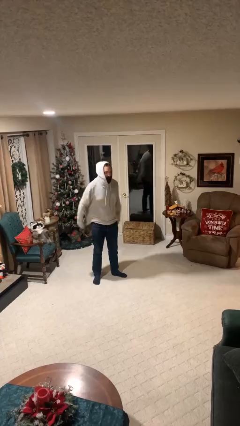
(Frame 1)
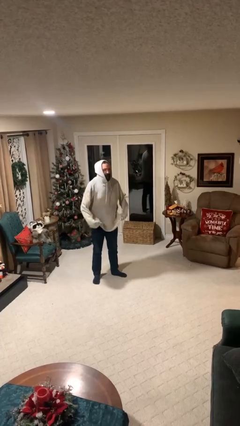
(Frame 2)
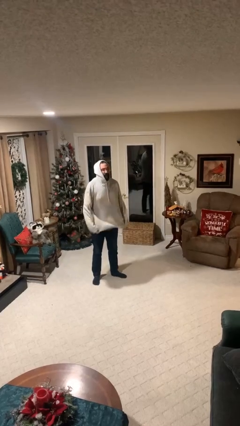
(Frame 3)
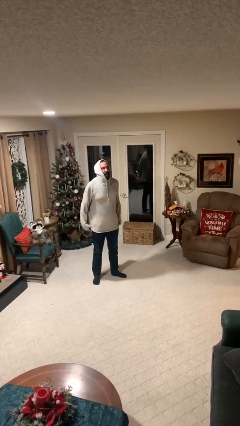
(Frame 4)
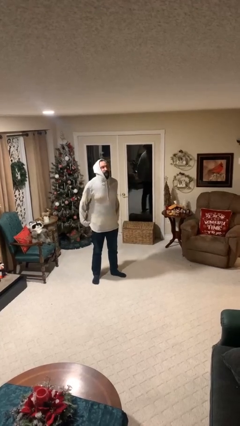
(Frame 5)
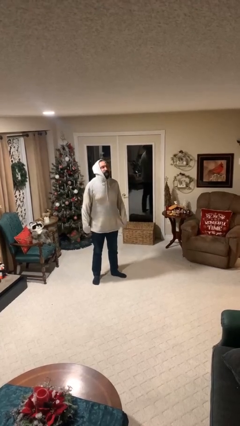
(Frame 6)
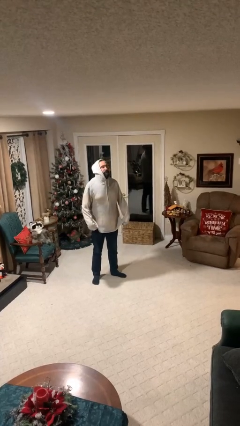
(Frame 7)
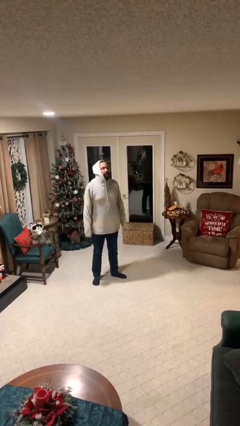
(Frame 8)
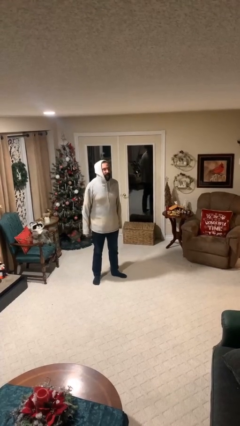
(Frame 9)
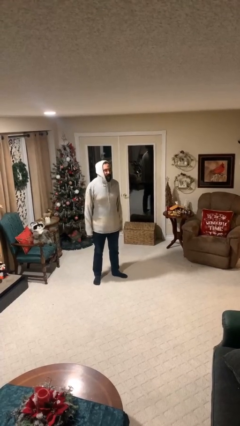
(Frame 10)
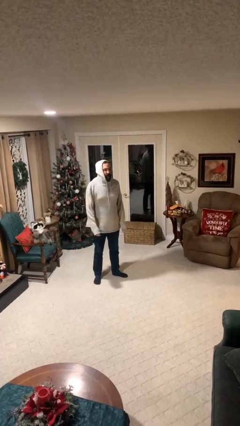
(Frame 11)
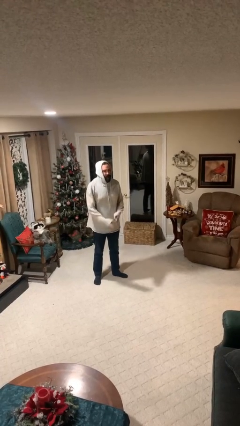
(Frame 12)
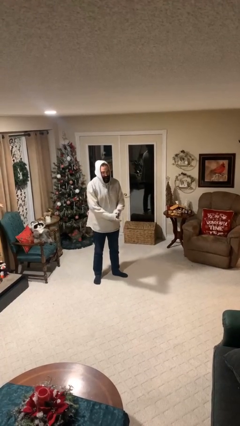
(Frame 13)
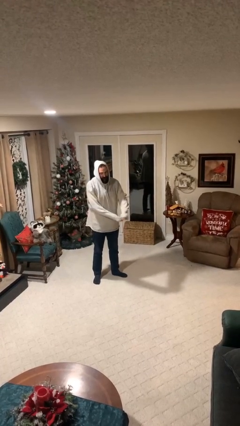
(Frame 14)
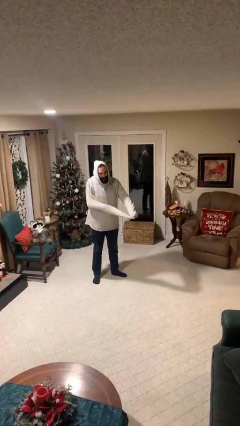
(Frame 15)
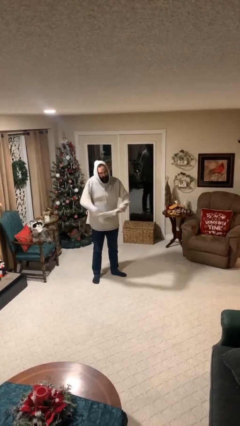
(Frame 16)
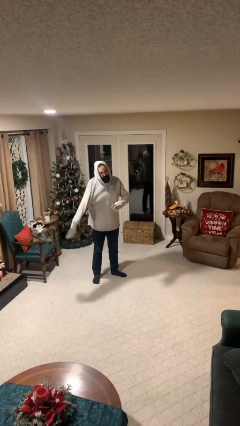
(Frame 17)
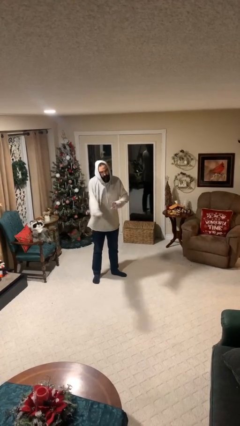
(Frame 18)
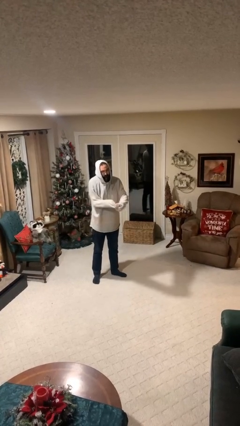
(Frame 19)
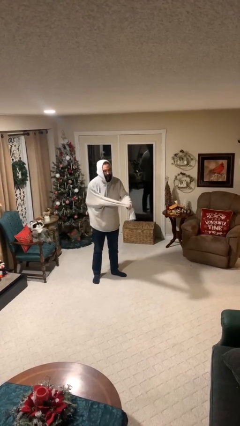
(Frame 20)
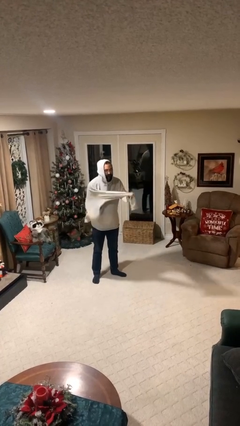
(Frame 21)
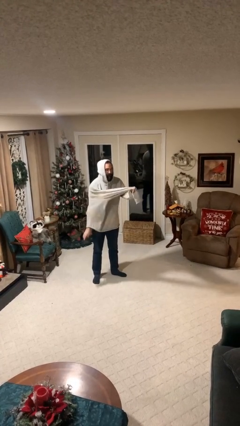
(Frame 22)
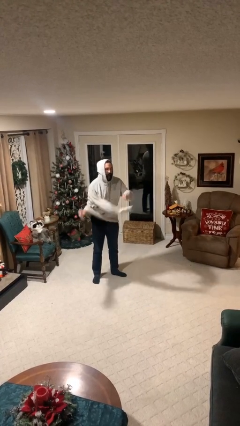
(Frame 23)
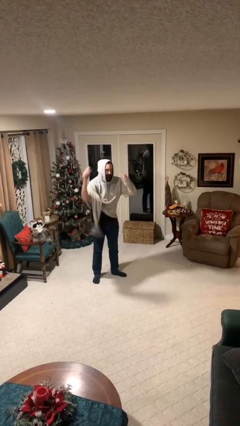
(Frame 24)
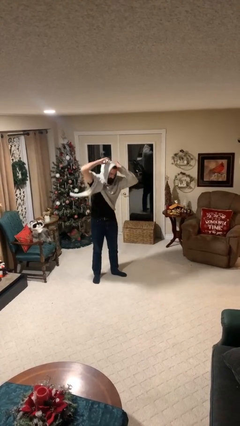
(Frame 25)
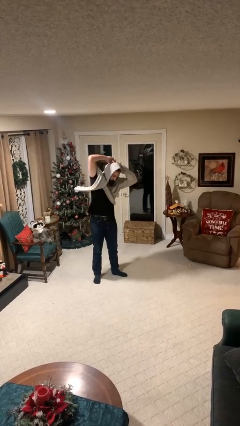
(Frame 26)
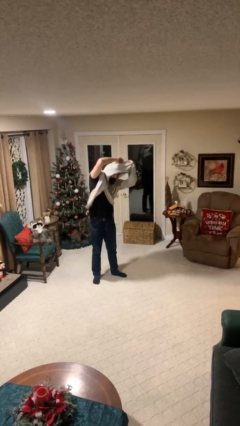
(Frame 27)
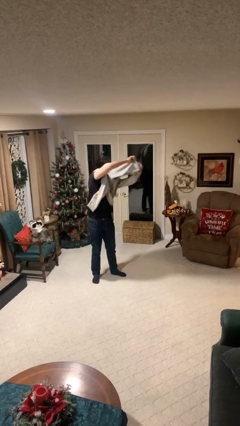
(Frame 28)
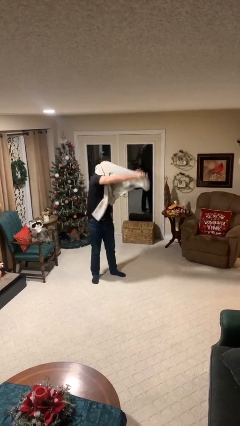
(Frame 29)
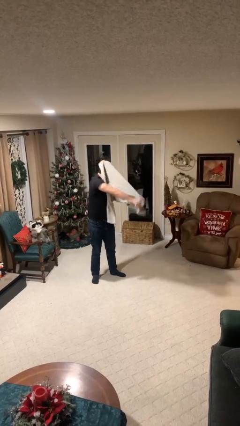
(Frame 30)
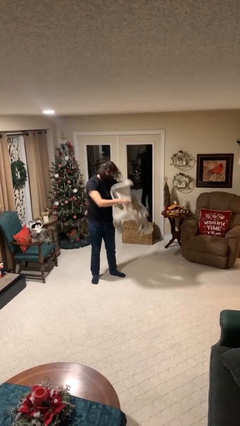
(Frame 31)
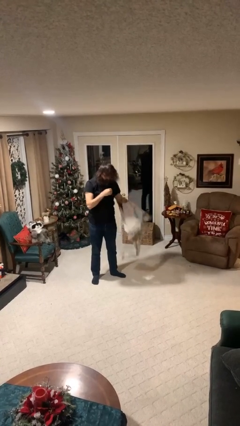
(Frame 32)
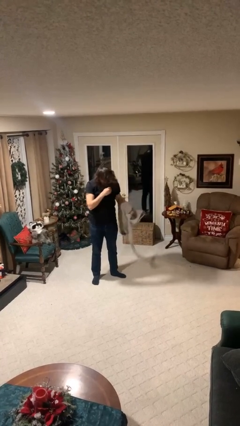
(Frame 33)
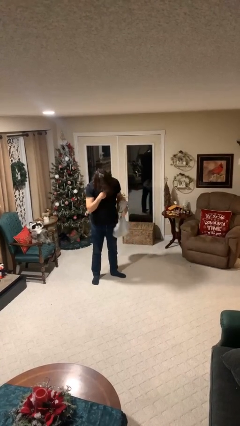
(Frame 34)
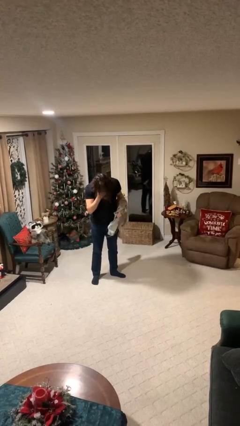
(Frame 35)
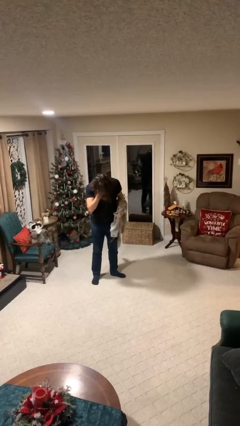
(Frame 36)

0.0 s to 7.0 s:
person takes off hoodie

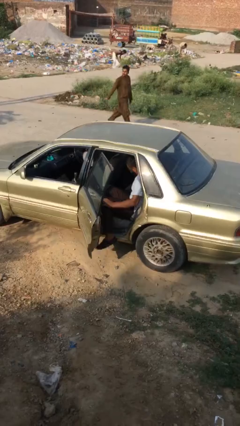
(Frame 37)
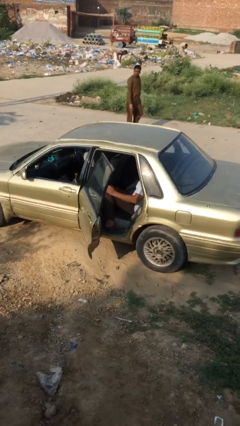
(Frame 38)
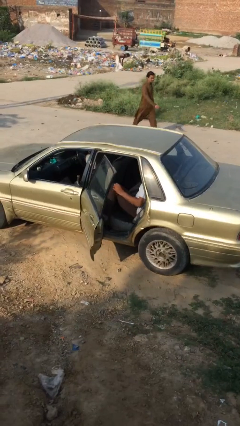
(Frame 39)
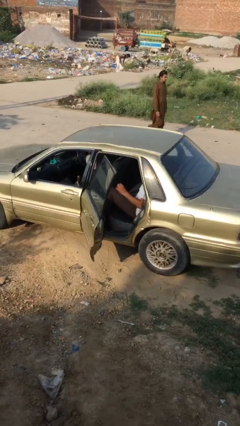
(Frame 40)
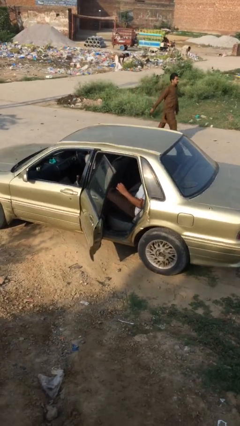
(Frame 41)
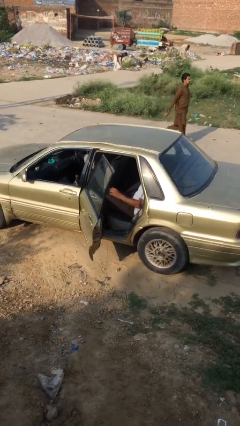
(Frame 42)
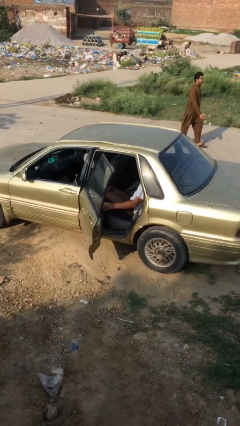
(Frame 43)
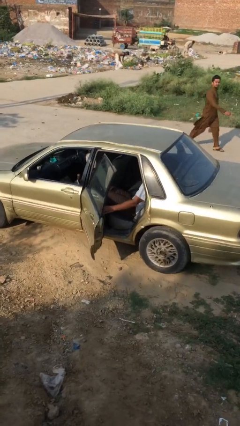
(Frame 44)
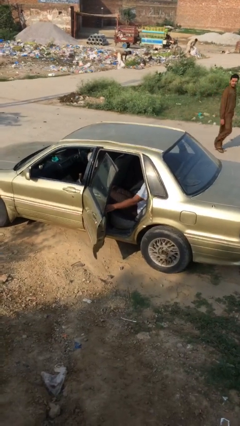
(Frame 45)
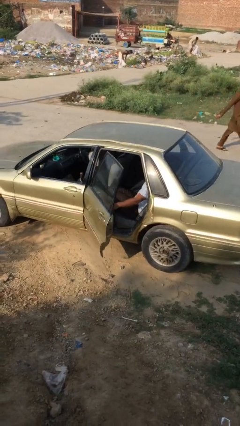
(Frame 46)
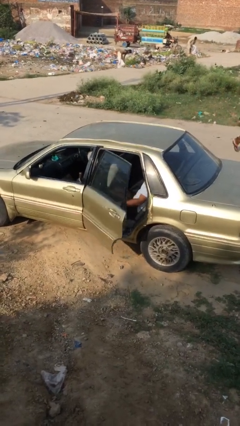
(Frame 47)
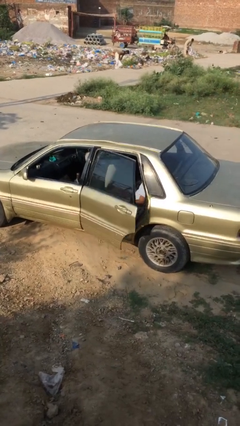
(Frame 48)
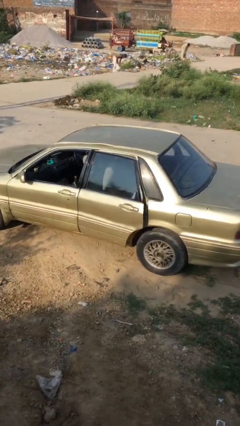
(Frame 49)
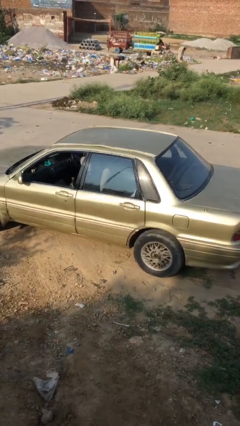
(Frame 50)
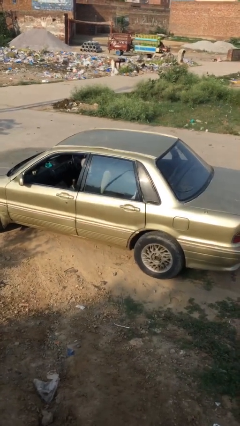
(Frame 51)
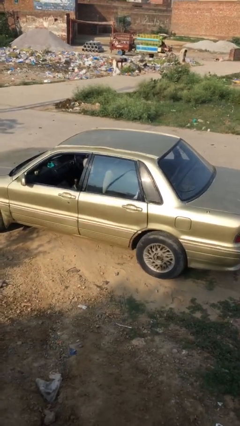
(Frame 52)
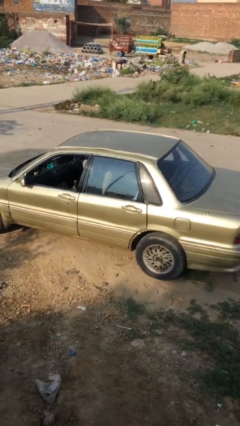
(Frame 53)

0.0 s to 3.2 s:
person closes car door

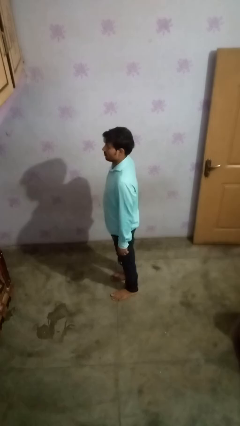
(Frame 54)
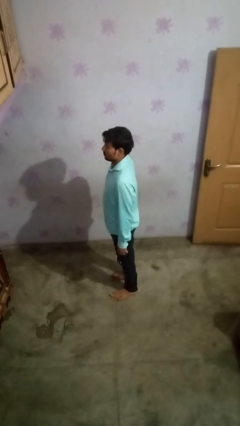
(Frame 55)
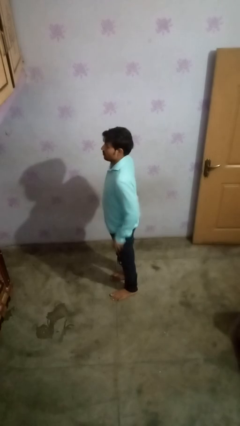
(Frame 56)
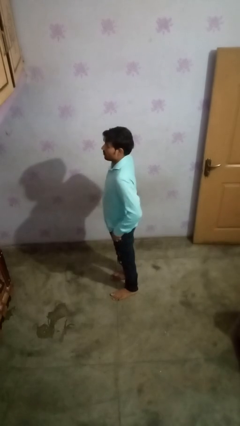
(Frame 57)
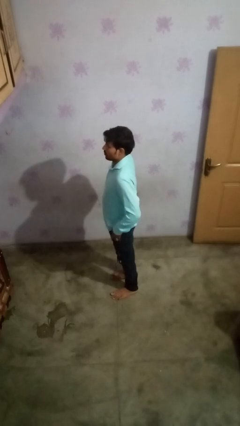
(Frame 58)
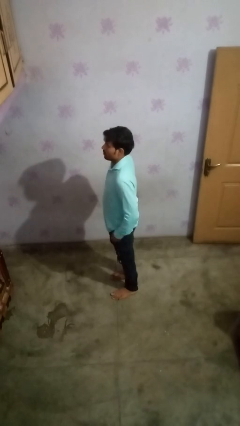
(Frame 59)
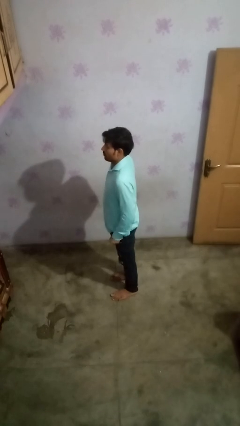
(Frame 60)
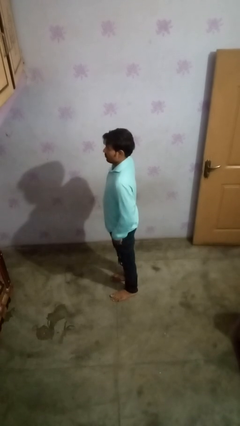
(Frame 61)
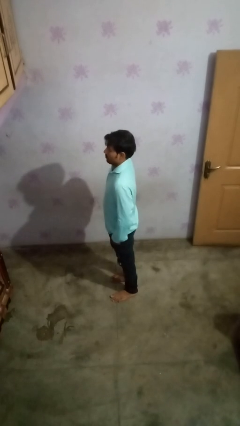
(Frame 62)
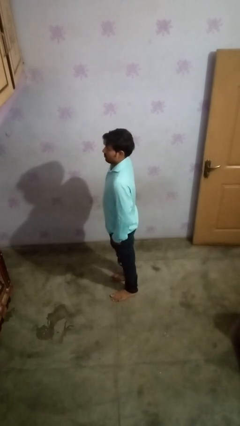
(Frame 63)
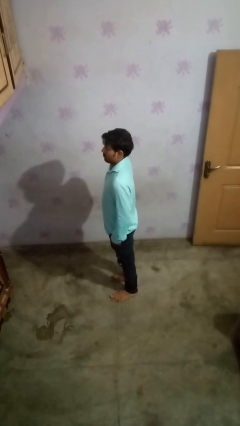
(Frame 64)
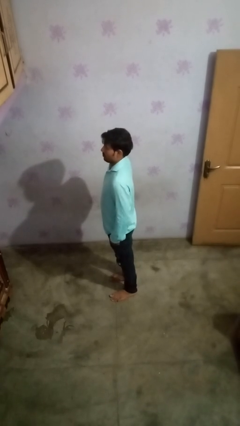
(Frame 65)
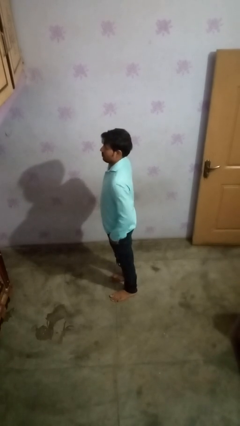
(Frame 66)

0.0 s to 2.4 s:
person puts hands in back pockets

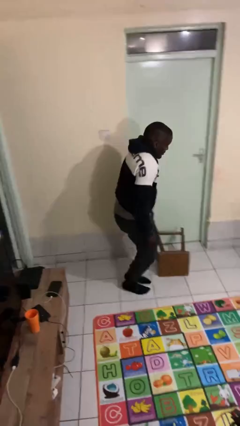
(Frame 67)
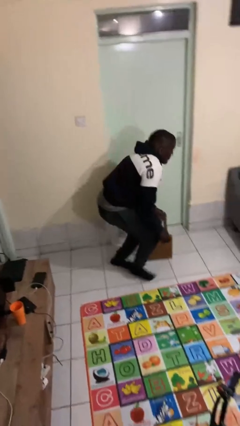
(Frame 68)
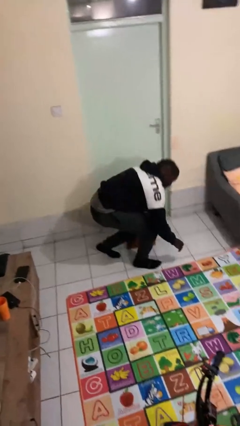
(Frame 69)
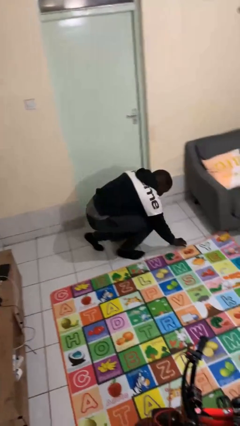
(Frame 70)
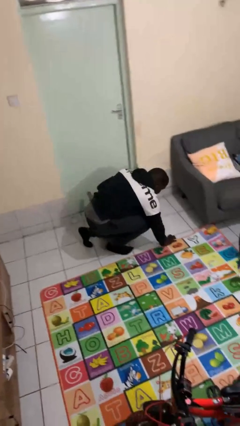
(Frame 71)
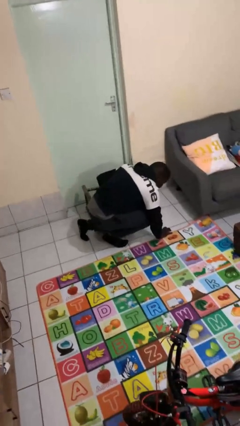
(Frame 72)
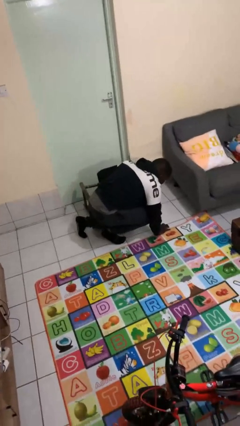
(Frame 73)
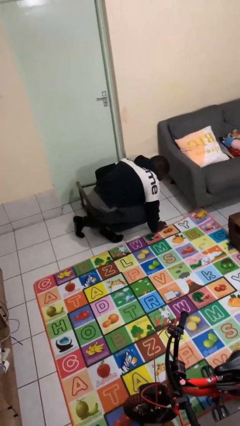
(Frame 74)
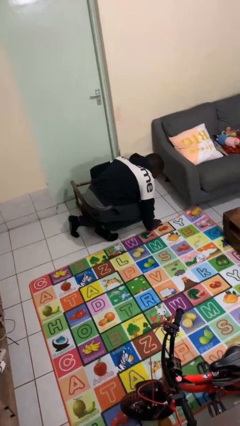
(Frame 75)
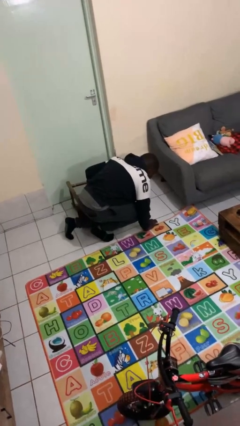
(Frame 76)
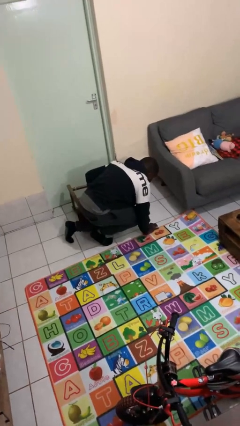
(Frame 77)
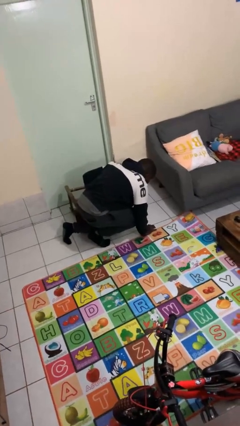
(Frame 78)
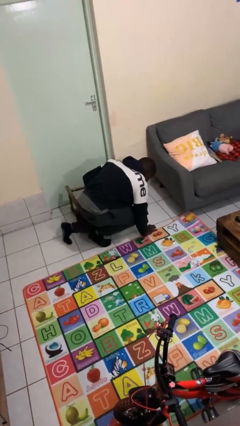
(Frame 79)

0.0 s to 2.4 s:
person trips on object on floor

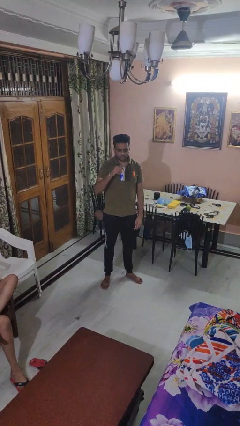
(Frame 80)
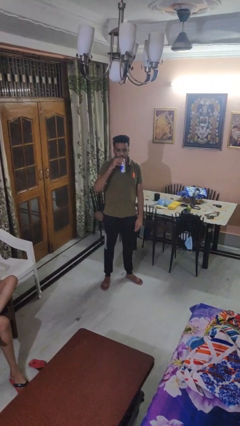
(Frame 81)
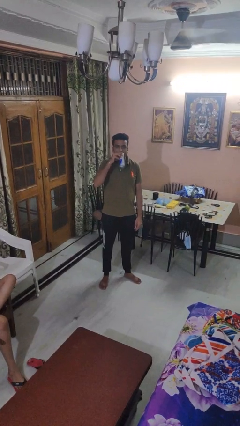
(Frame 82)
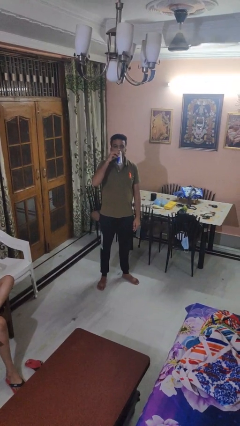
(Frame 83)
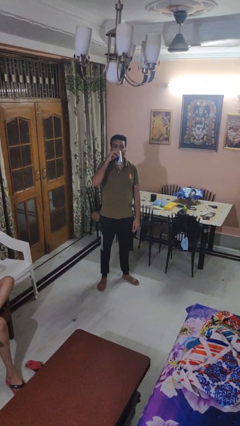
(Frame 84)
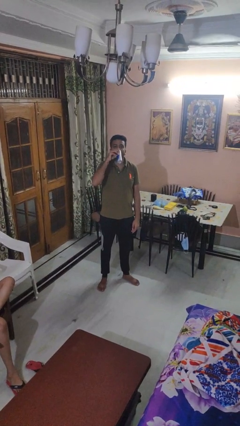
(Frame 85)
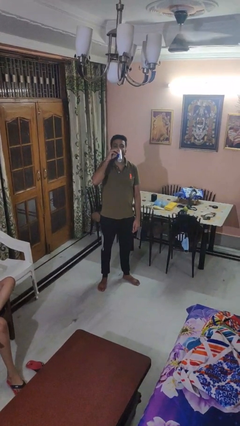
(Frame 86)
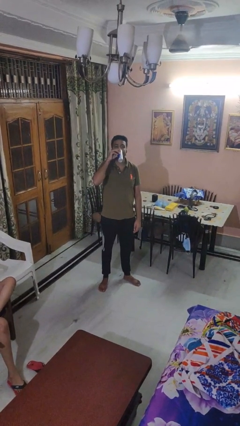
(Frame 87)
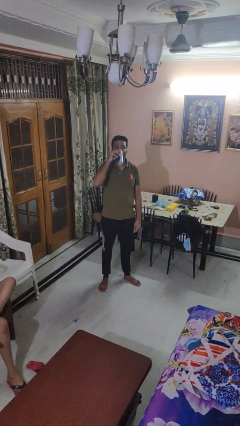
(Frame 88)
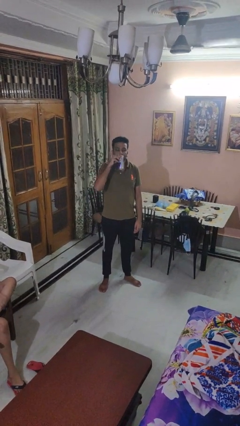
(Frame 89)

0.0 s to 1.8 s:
person drinks from beverage can

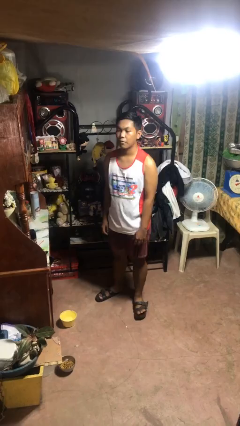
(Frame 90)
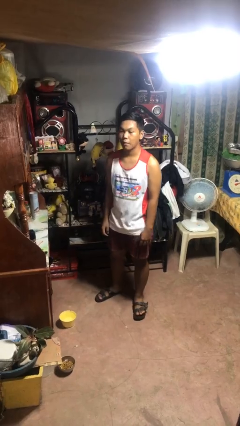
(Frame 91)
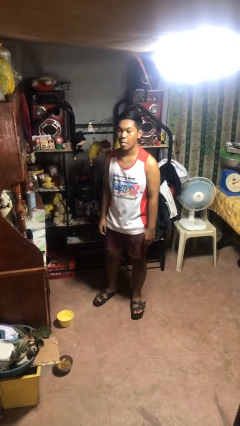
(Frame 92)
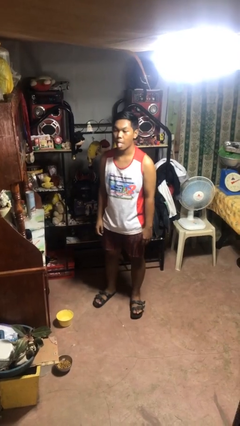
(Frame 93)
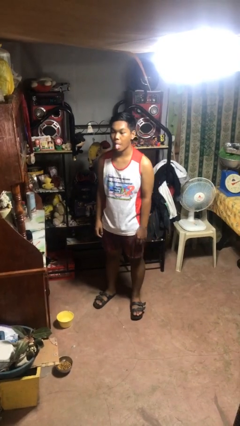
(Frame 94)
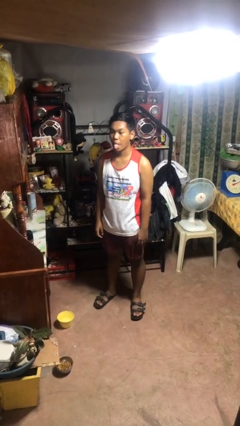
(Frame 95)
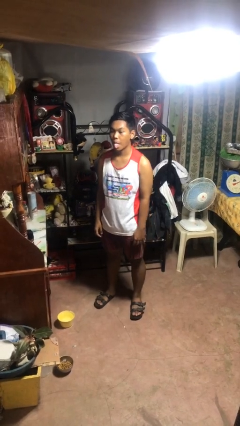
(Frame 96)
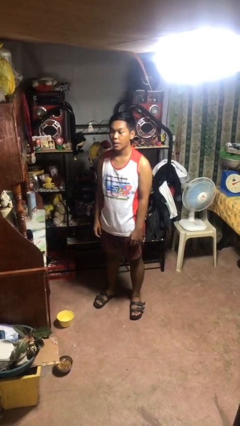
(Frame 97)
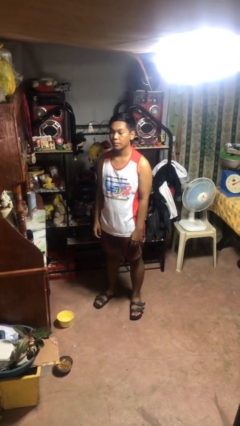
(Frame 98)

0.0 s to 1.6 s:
person sticks out tongue
